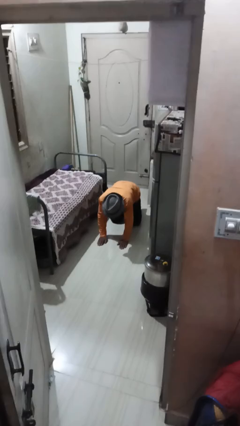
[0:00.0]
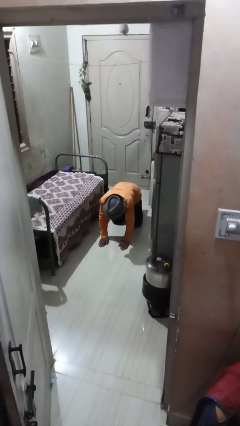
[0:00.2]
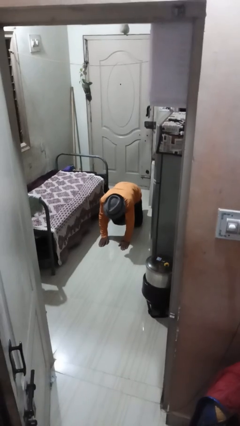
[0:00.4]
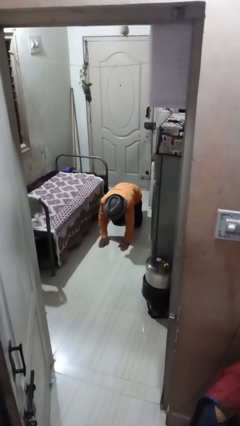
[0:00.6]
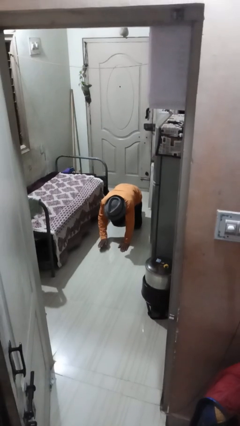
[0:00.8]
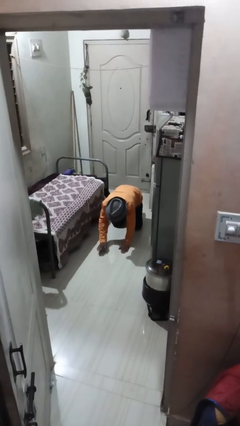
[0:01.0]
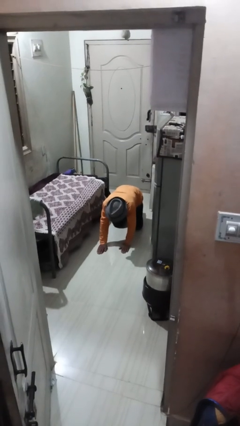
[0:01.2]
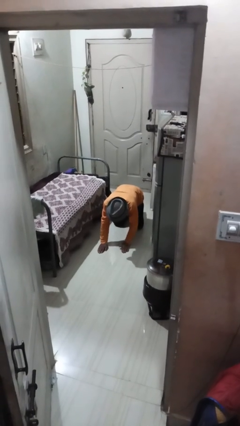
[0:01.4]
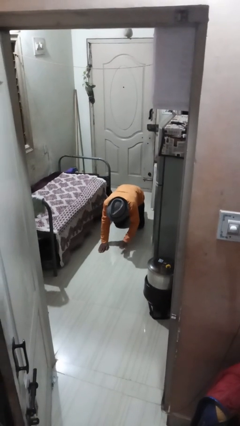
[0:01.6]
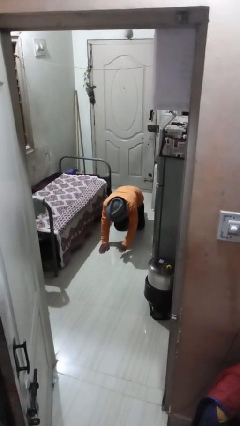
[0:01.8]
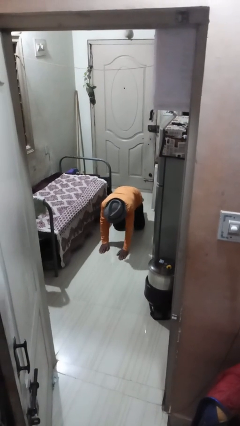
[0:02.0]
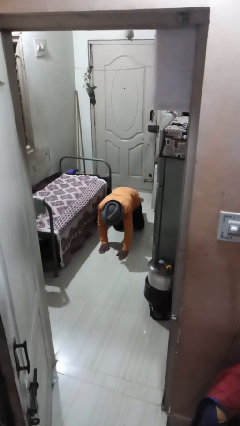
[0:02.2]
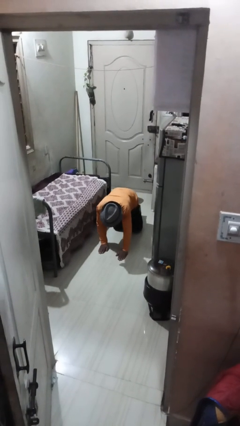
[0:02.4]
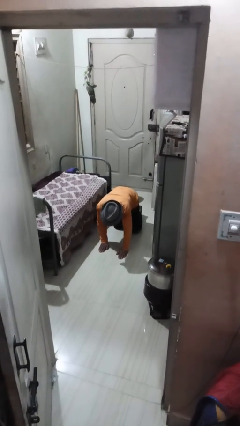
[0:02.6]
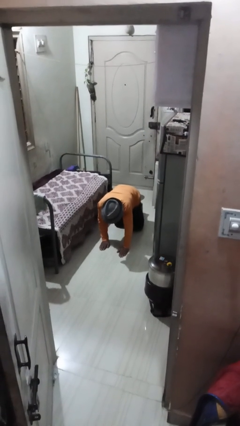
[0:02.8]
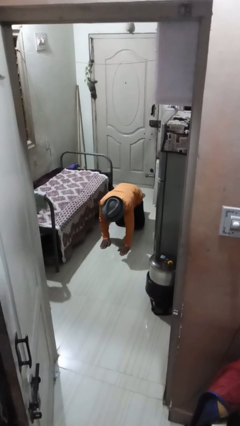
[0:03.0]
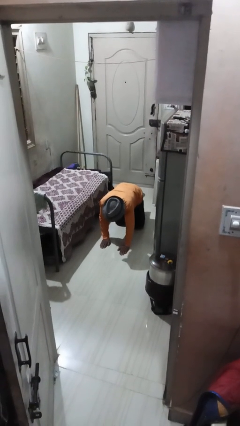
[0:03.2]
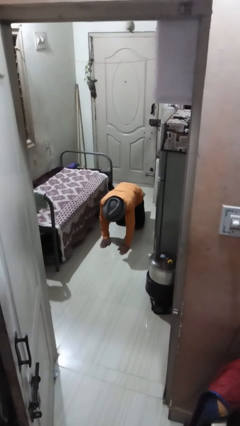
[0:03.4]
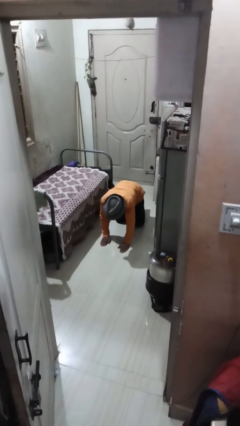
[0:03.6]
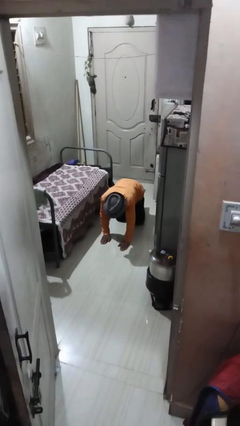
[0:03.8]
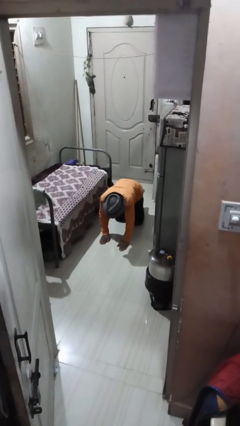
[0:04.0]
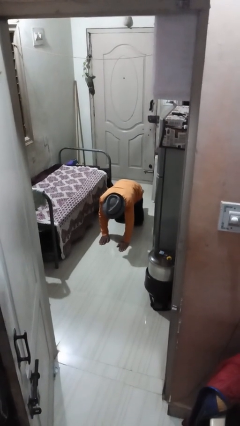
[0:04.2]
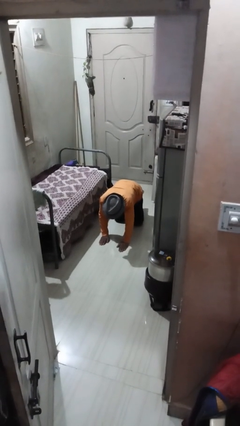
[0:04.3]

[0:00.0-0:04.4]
person crawls

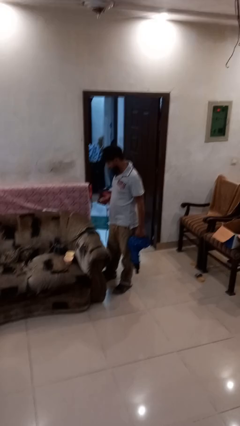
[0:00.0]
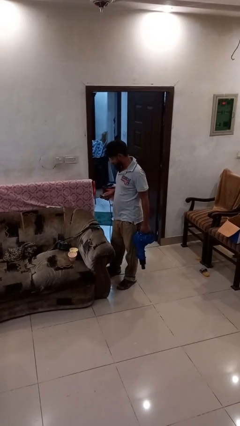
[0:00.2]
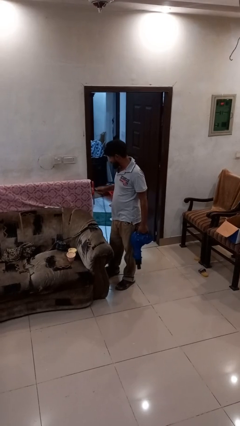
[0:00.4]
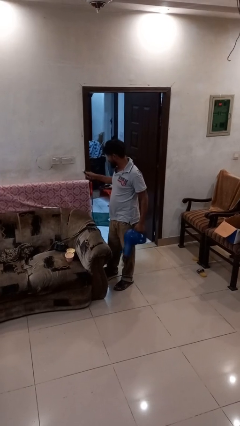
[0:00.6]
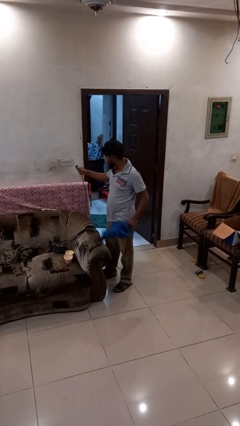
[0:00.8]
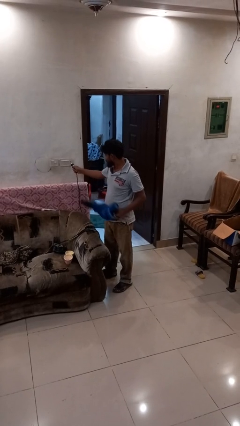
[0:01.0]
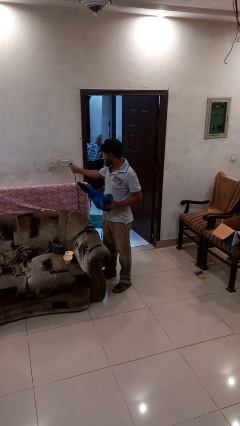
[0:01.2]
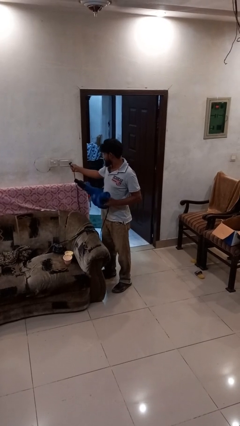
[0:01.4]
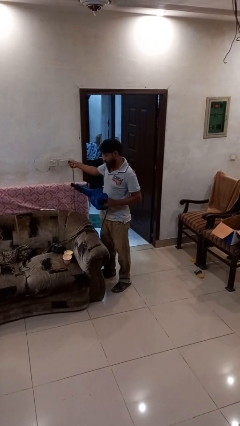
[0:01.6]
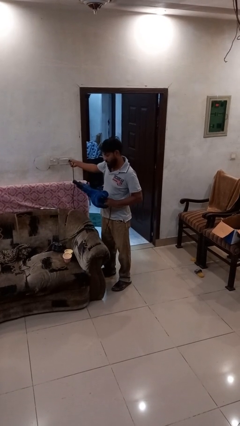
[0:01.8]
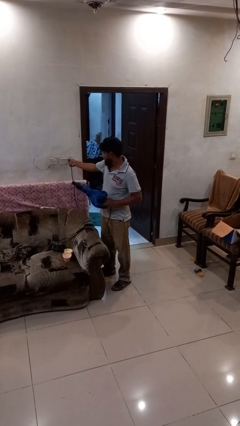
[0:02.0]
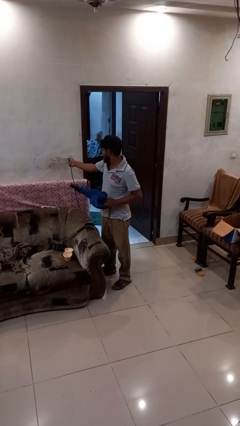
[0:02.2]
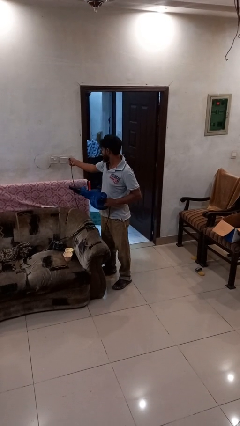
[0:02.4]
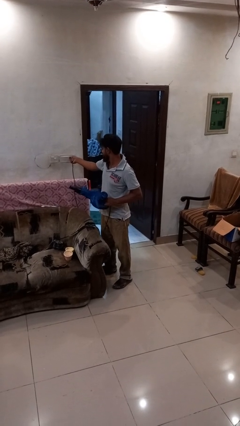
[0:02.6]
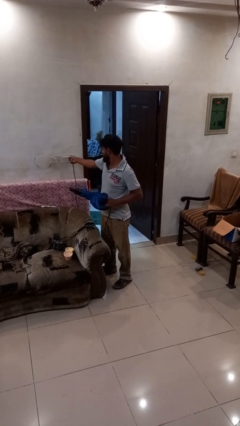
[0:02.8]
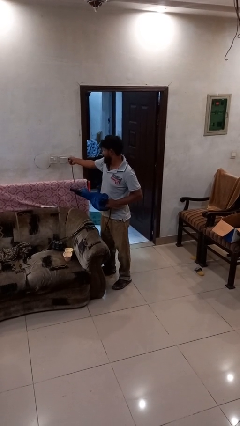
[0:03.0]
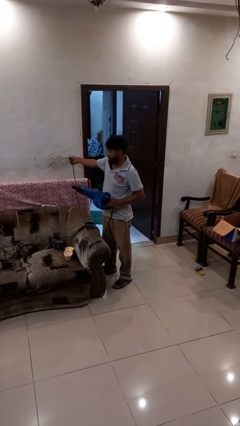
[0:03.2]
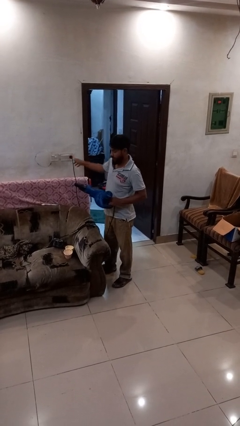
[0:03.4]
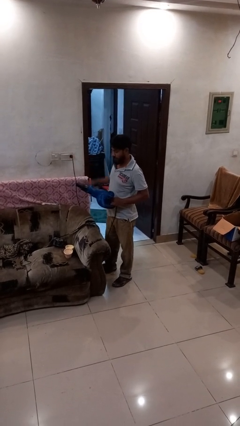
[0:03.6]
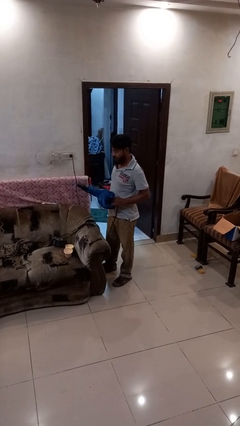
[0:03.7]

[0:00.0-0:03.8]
person plugs into electrical socket

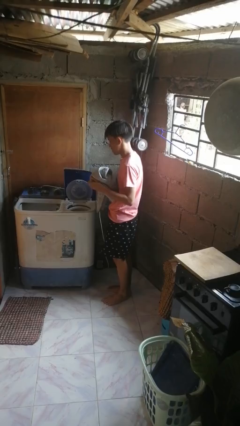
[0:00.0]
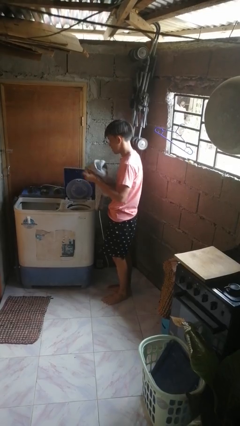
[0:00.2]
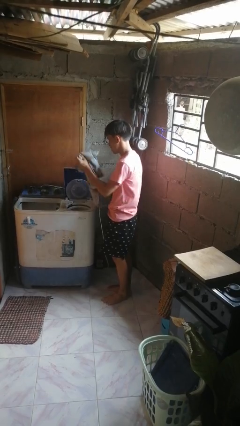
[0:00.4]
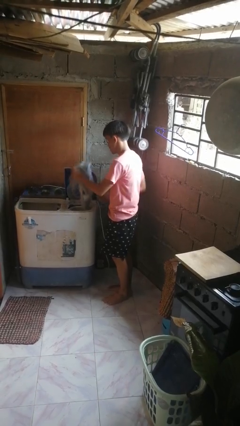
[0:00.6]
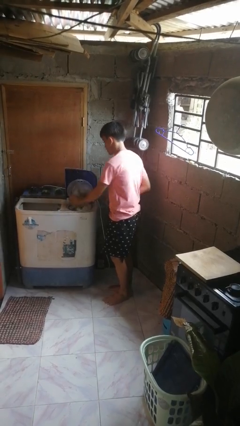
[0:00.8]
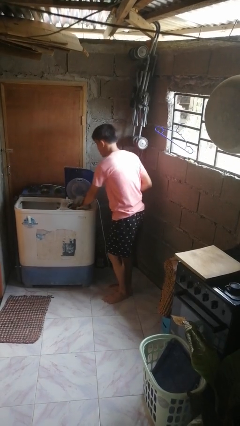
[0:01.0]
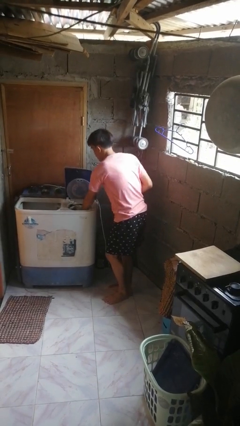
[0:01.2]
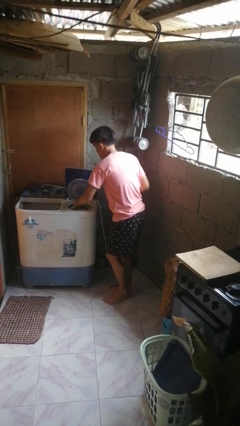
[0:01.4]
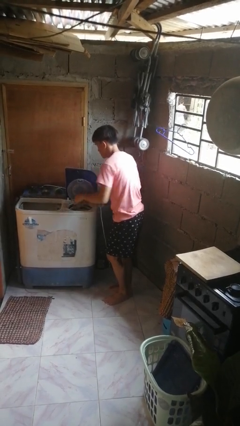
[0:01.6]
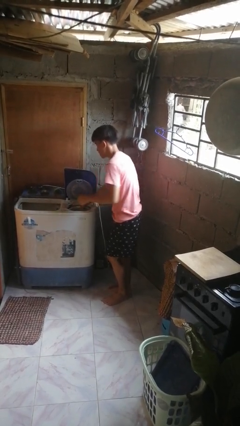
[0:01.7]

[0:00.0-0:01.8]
person loads dryer

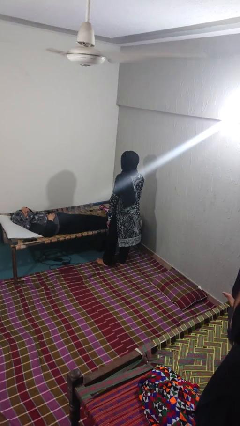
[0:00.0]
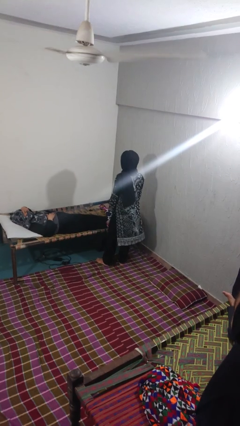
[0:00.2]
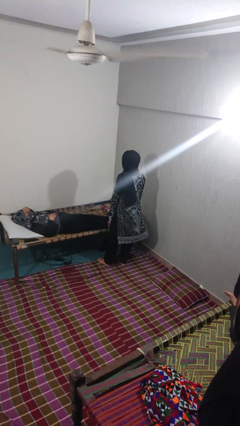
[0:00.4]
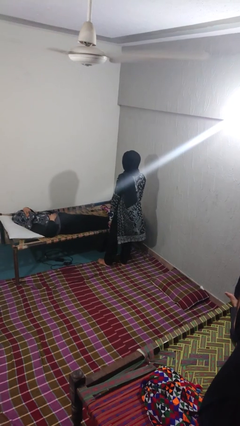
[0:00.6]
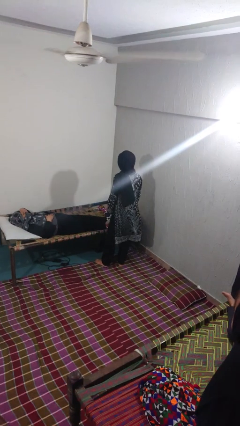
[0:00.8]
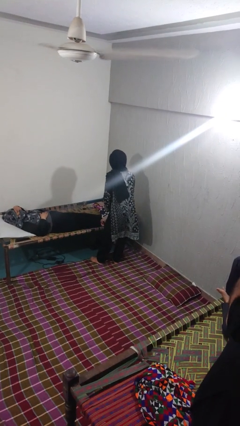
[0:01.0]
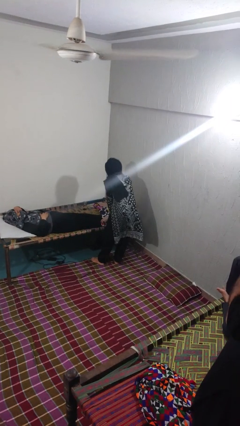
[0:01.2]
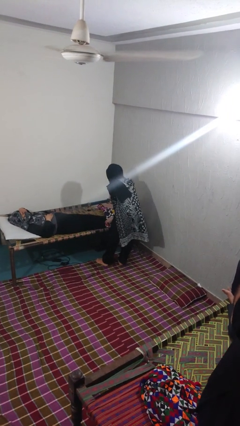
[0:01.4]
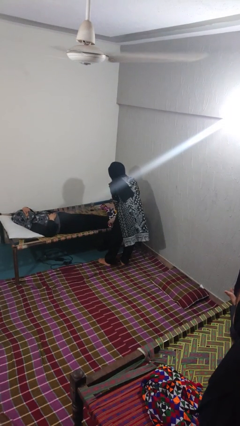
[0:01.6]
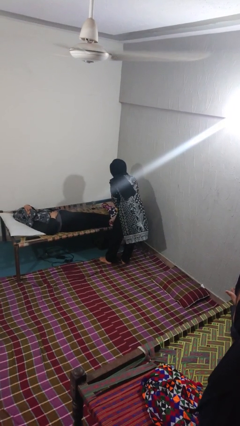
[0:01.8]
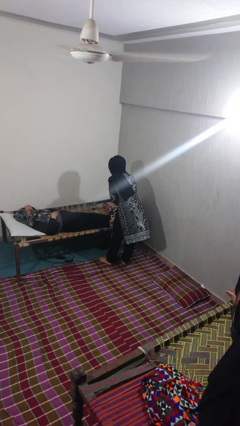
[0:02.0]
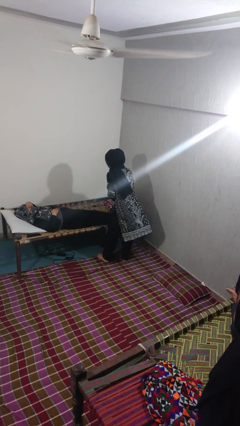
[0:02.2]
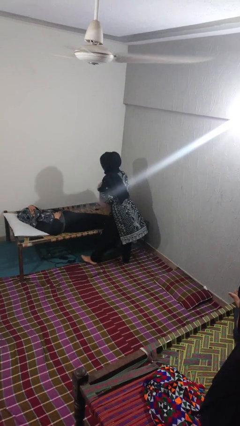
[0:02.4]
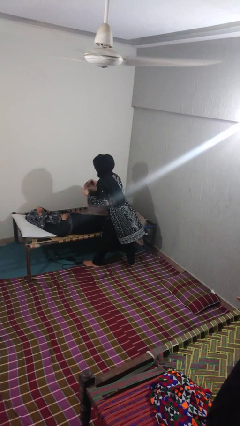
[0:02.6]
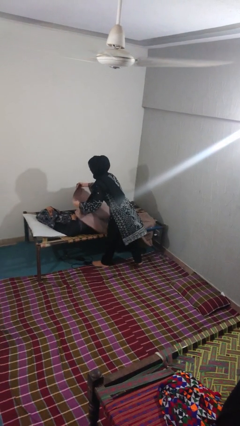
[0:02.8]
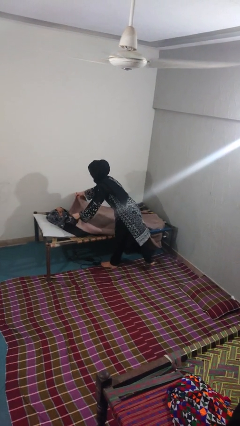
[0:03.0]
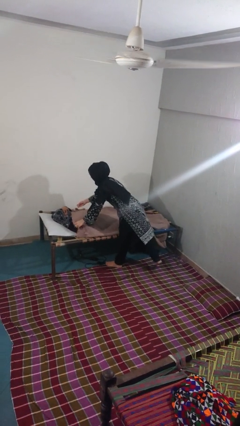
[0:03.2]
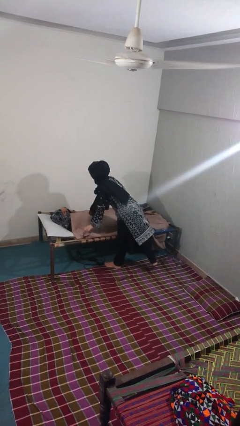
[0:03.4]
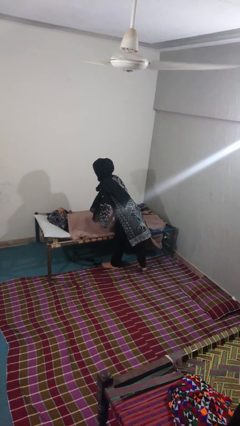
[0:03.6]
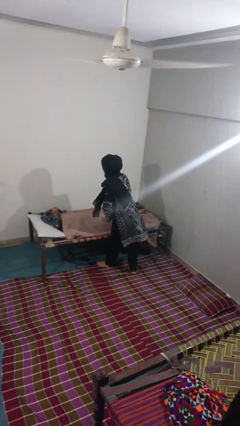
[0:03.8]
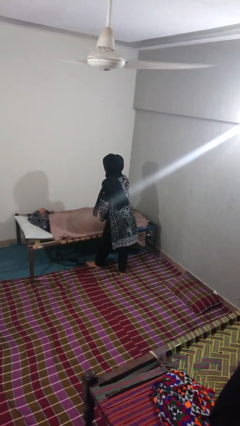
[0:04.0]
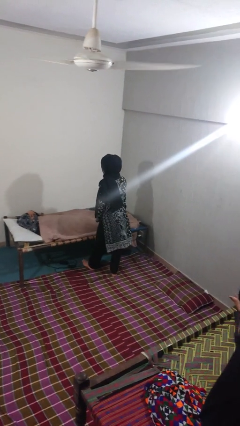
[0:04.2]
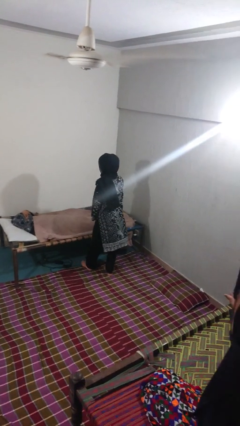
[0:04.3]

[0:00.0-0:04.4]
person covers friend with blanket

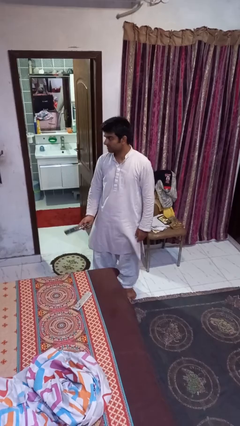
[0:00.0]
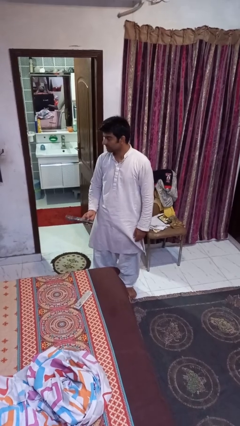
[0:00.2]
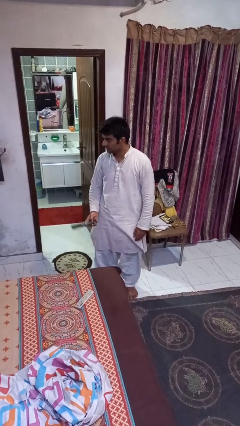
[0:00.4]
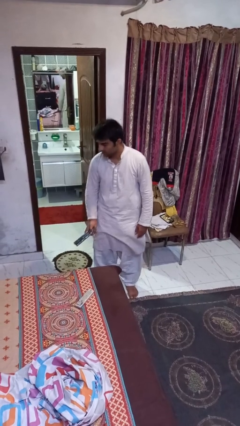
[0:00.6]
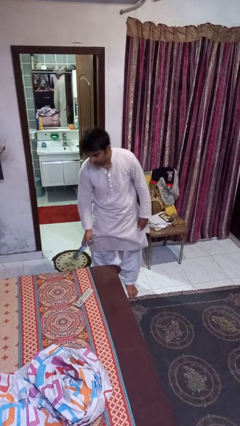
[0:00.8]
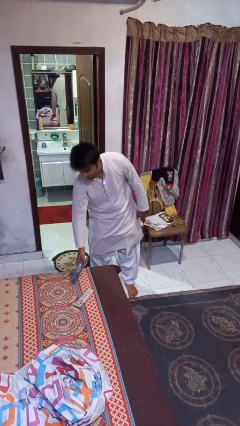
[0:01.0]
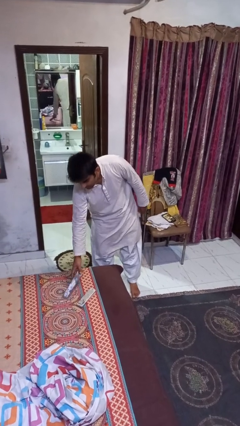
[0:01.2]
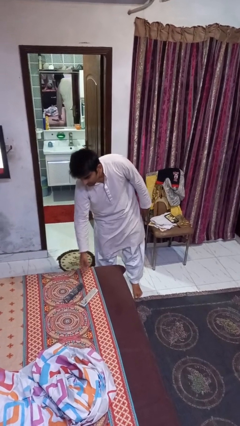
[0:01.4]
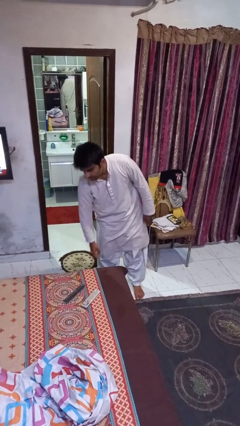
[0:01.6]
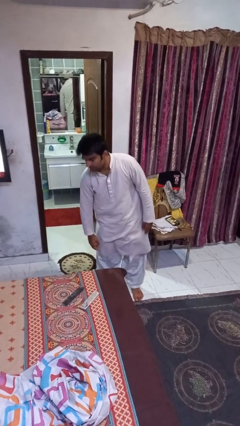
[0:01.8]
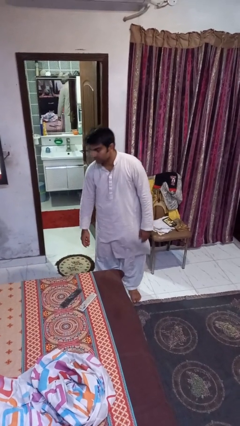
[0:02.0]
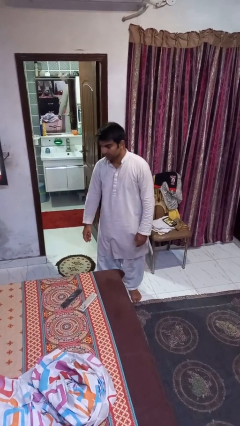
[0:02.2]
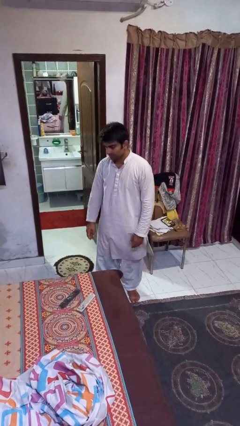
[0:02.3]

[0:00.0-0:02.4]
person puts down object on bed

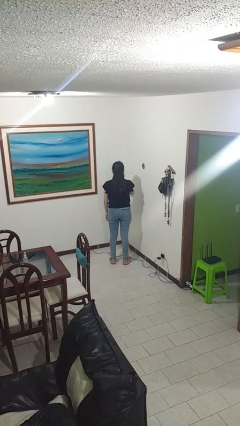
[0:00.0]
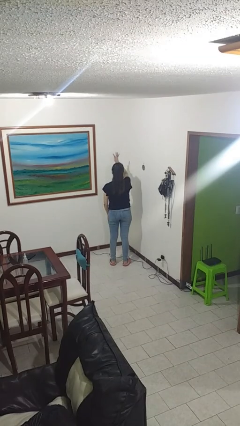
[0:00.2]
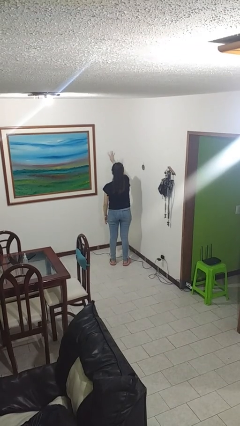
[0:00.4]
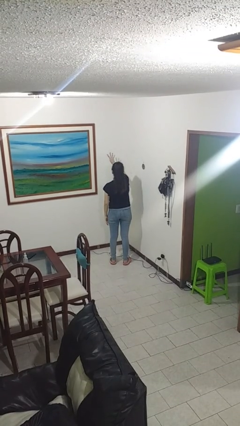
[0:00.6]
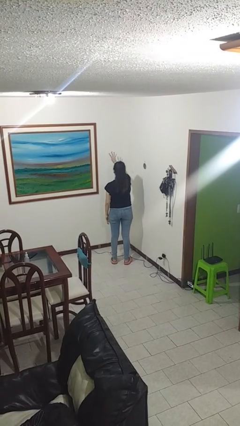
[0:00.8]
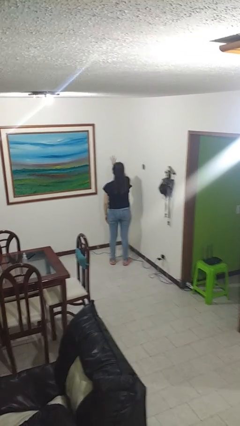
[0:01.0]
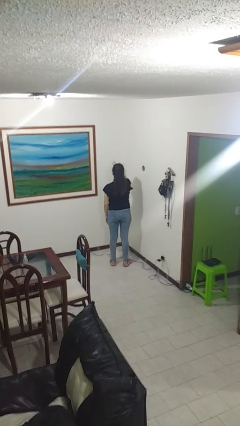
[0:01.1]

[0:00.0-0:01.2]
person gestures number four
